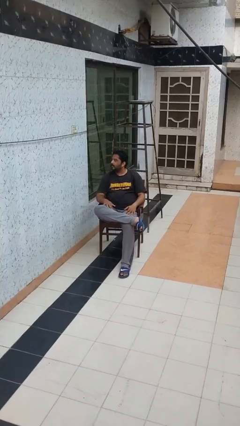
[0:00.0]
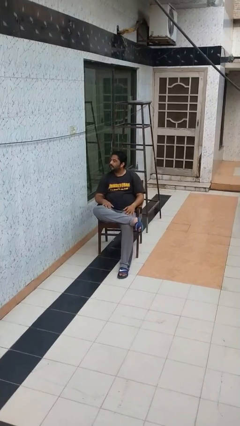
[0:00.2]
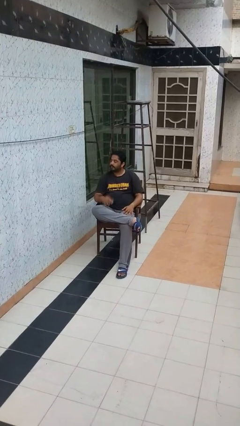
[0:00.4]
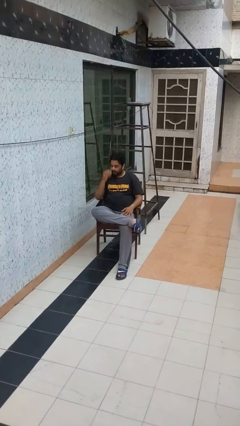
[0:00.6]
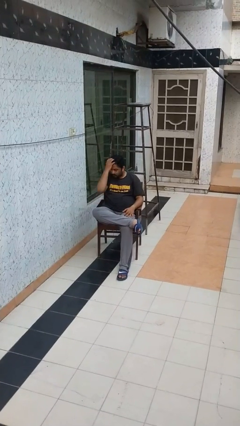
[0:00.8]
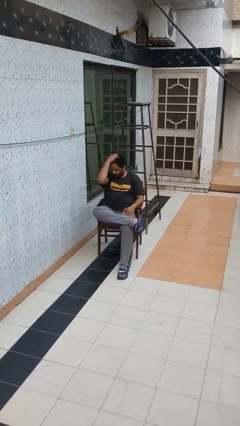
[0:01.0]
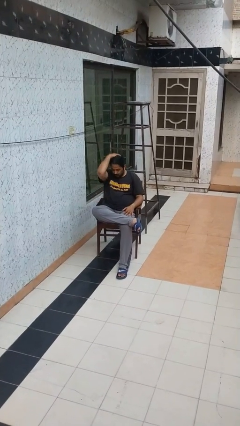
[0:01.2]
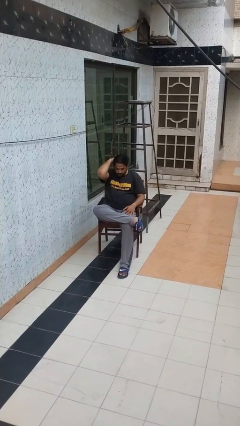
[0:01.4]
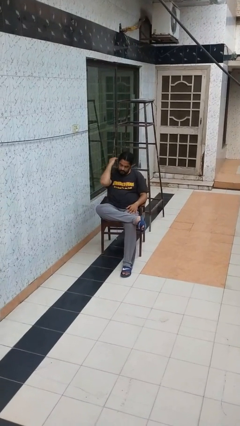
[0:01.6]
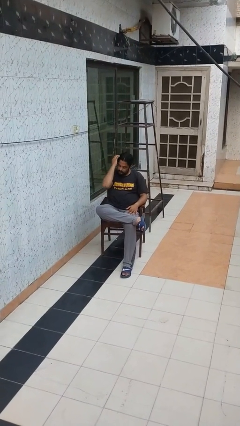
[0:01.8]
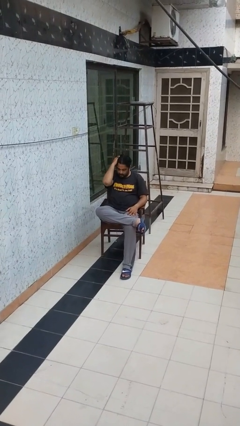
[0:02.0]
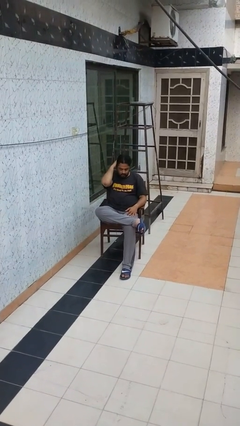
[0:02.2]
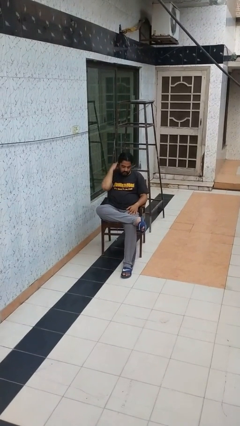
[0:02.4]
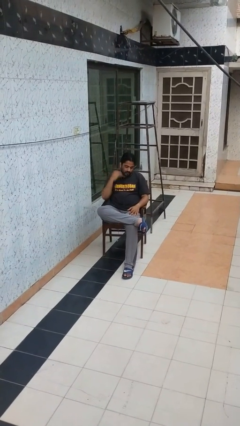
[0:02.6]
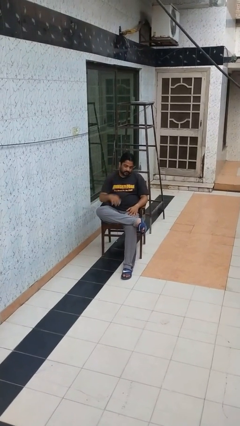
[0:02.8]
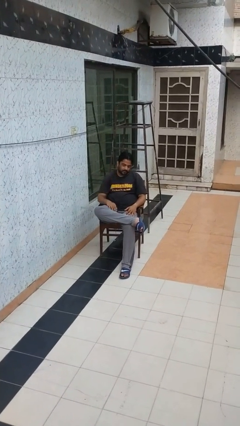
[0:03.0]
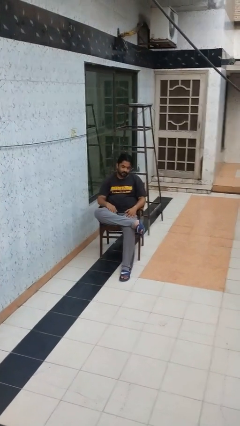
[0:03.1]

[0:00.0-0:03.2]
person strokes hair

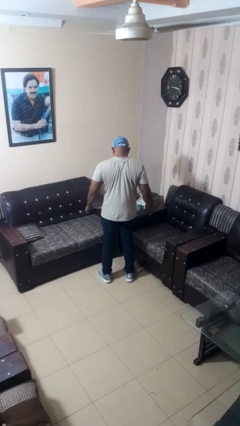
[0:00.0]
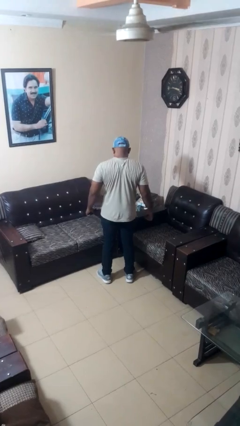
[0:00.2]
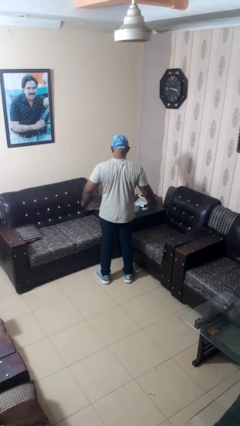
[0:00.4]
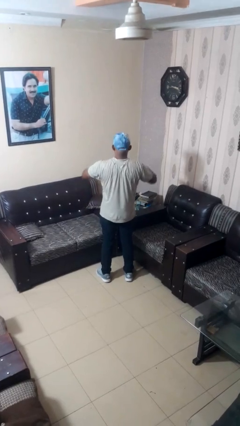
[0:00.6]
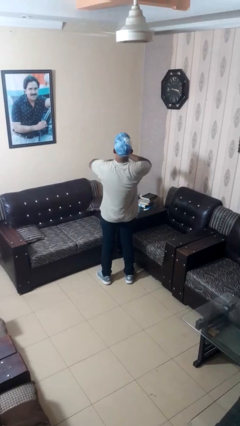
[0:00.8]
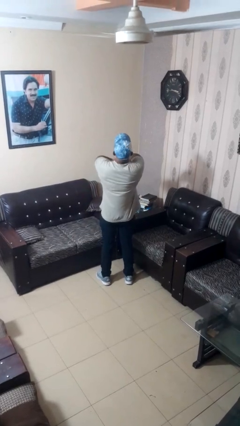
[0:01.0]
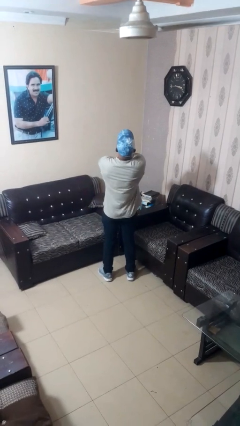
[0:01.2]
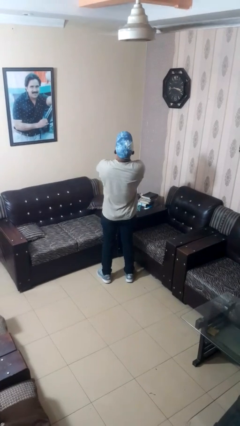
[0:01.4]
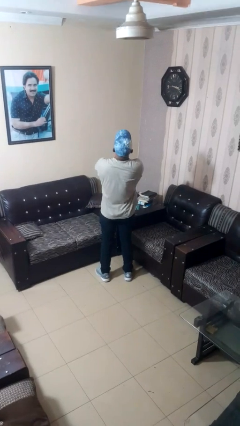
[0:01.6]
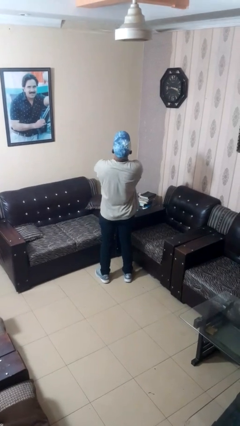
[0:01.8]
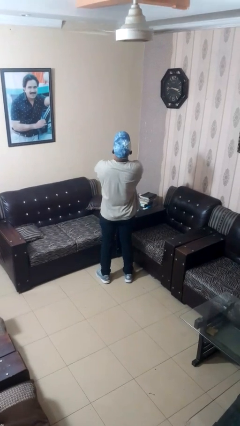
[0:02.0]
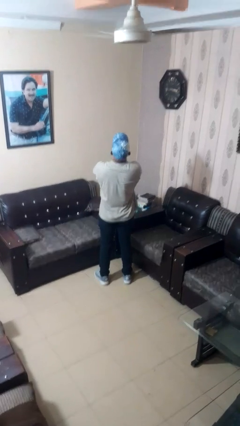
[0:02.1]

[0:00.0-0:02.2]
person crosses arms

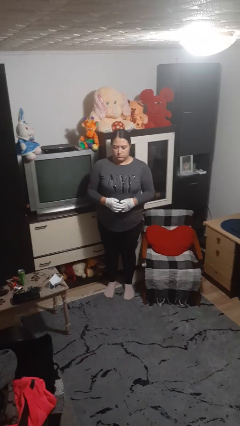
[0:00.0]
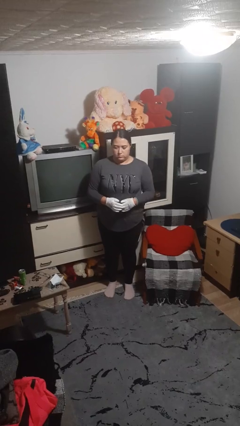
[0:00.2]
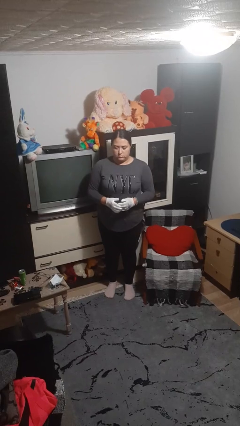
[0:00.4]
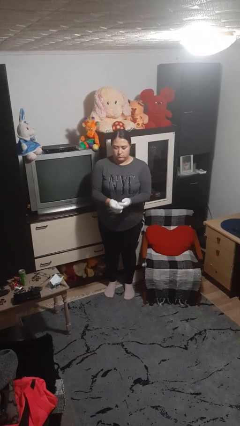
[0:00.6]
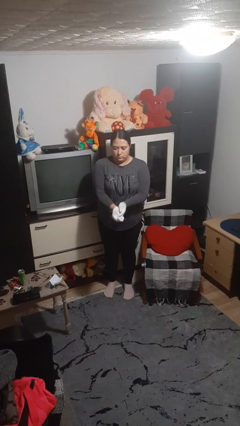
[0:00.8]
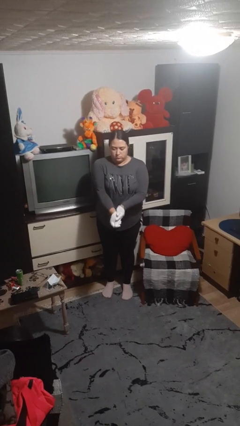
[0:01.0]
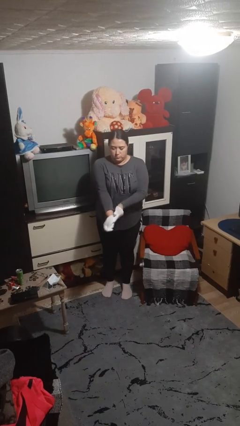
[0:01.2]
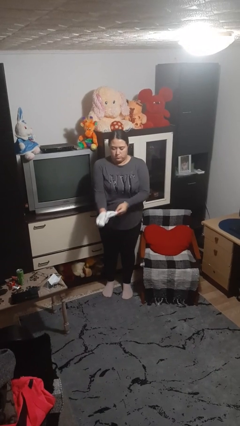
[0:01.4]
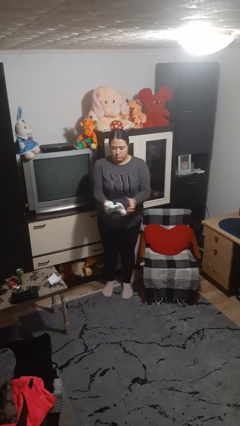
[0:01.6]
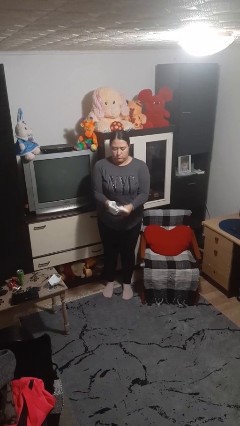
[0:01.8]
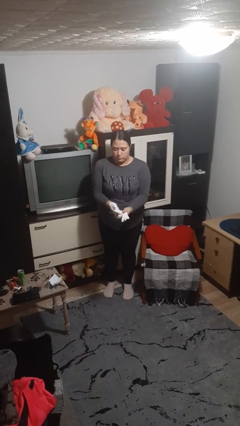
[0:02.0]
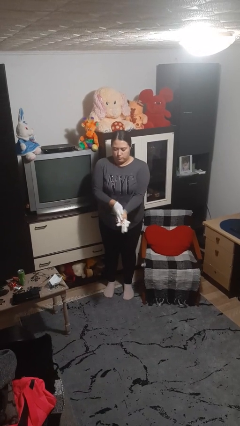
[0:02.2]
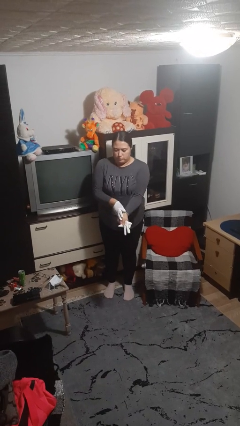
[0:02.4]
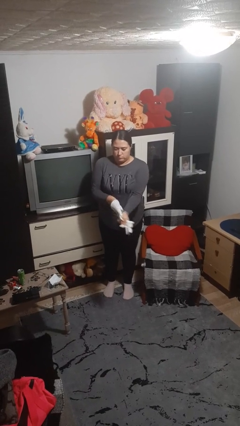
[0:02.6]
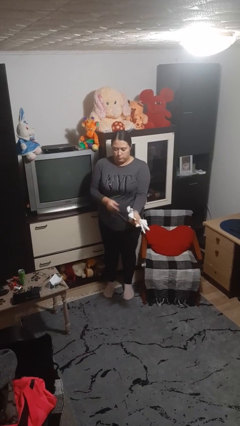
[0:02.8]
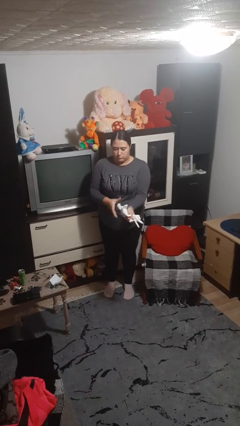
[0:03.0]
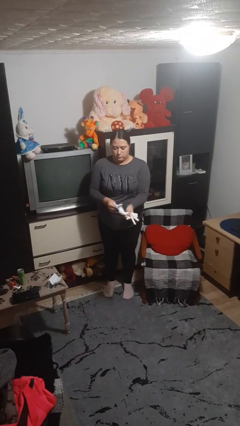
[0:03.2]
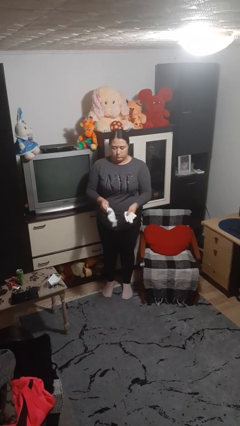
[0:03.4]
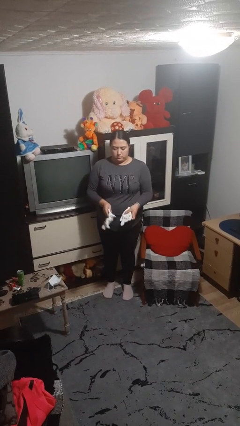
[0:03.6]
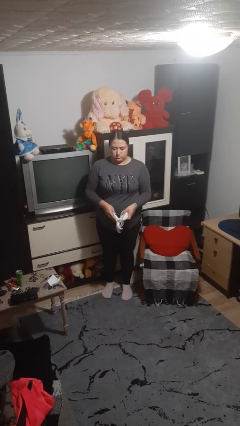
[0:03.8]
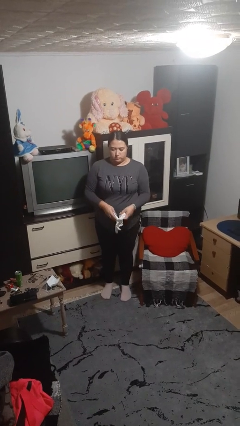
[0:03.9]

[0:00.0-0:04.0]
person takes off gloves

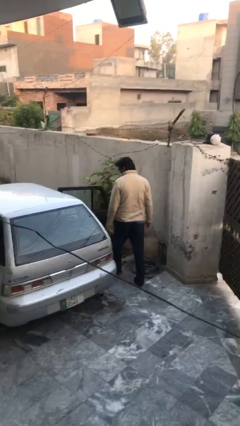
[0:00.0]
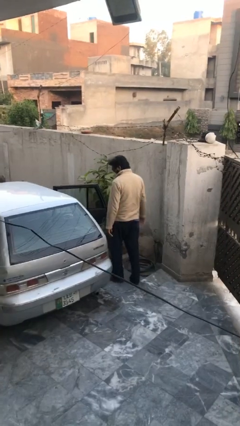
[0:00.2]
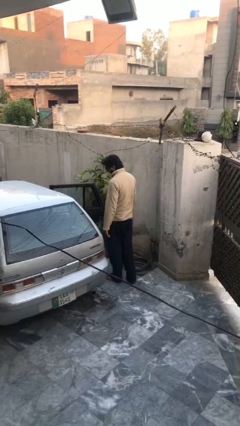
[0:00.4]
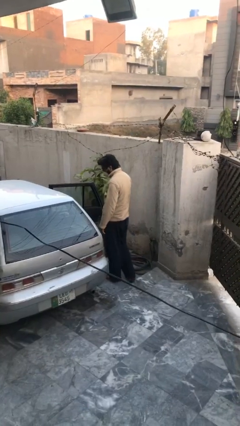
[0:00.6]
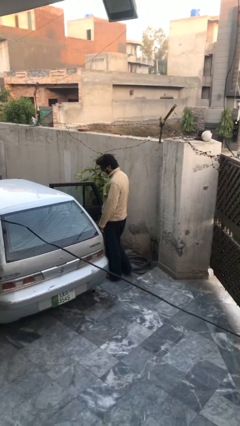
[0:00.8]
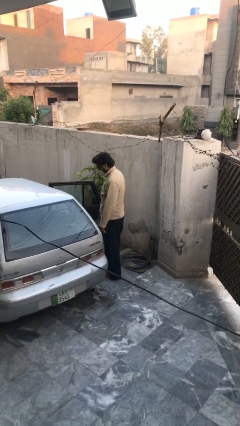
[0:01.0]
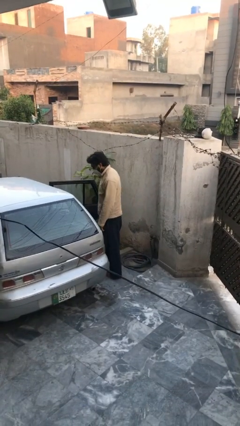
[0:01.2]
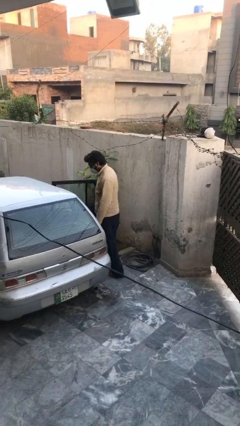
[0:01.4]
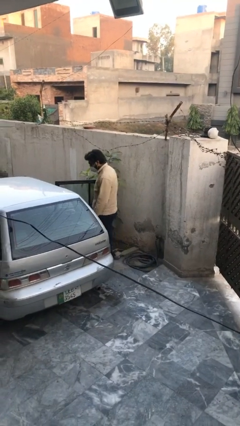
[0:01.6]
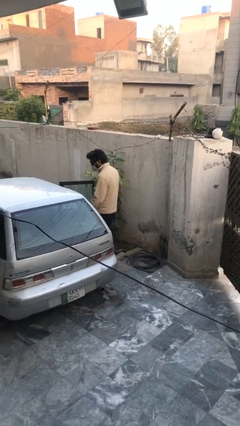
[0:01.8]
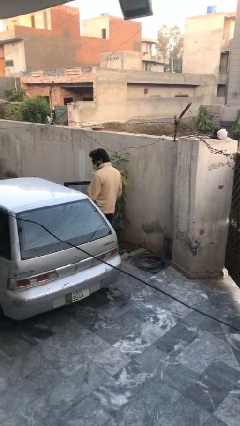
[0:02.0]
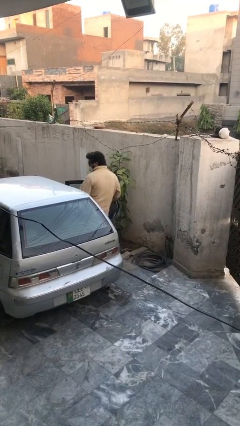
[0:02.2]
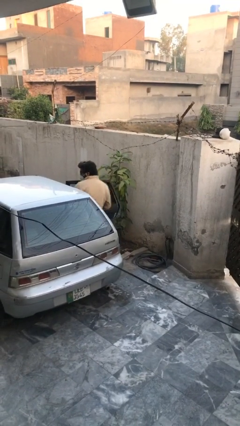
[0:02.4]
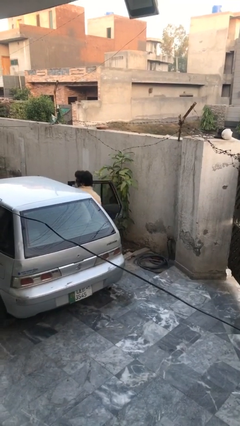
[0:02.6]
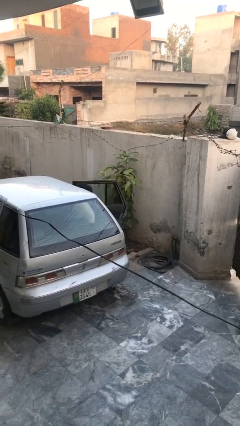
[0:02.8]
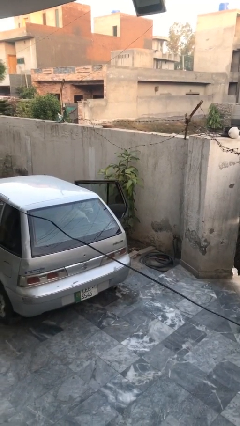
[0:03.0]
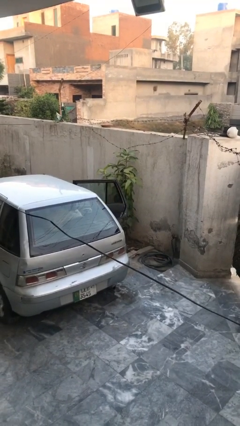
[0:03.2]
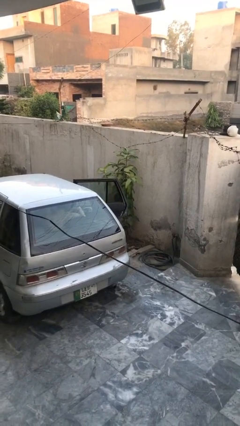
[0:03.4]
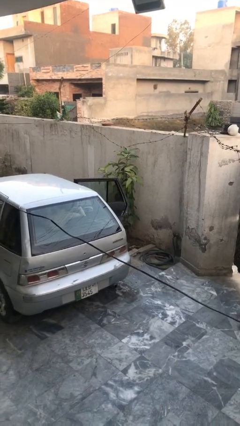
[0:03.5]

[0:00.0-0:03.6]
person enters car

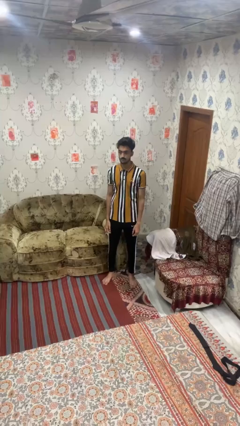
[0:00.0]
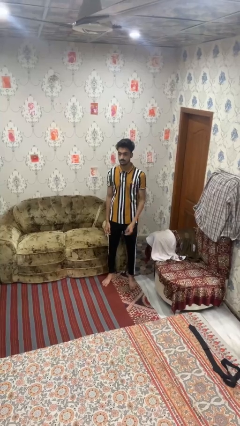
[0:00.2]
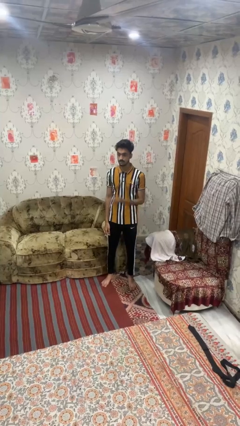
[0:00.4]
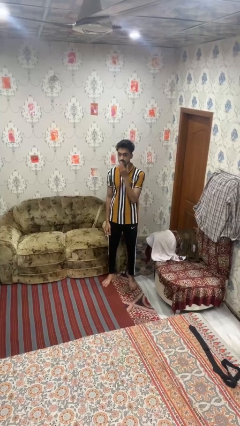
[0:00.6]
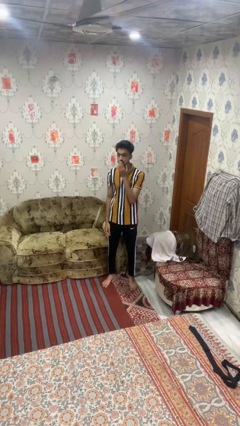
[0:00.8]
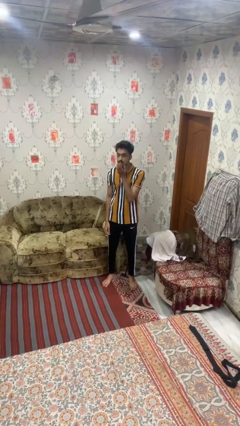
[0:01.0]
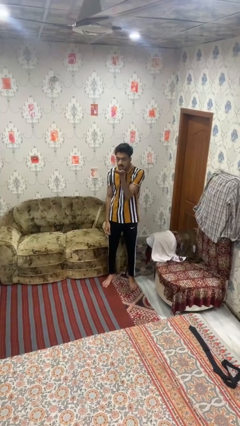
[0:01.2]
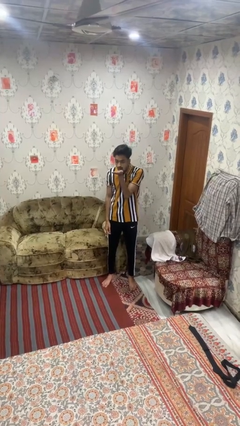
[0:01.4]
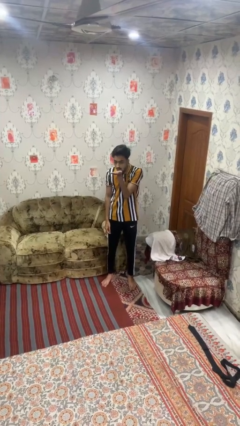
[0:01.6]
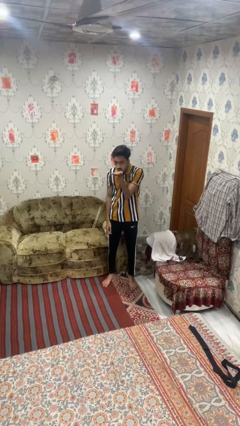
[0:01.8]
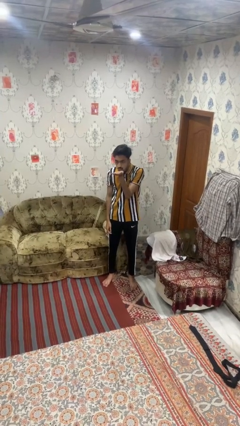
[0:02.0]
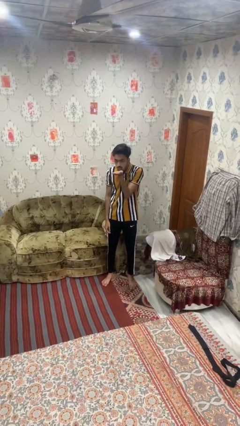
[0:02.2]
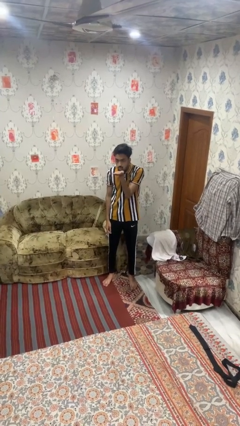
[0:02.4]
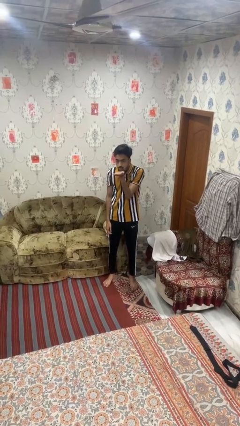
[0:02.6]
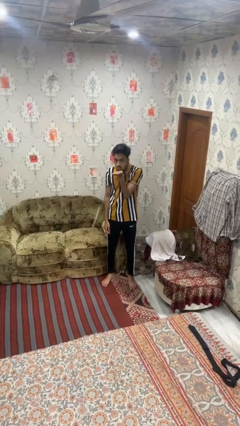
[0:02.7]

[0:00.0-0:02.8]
person gestures blow kiss

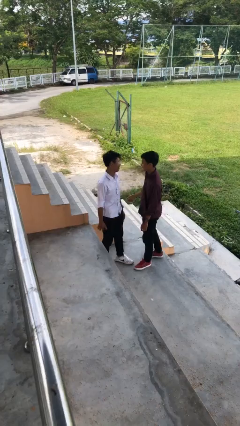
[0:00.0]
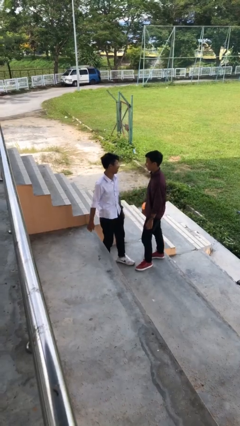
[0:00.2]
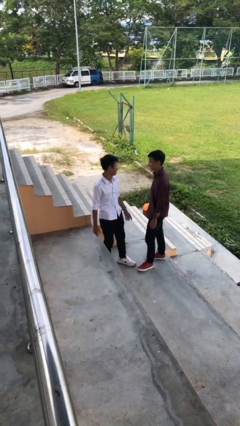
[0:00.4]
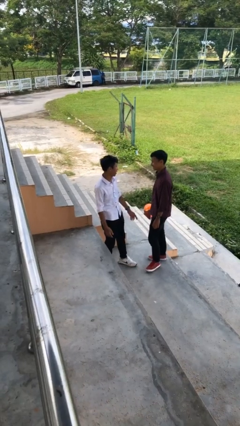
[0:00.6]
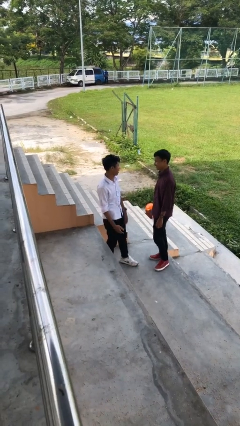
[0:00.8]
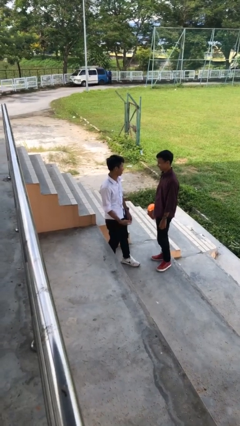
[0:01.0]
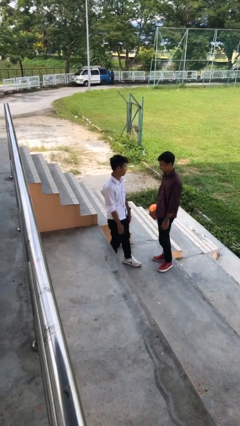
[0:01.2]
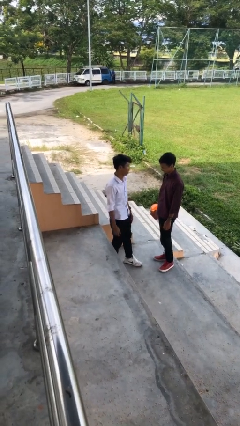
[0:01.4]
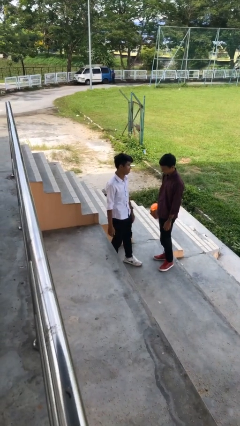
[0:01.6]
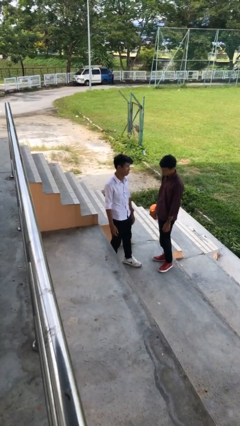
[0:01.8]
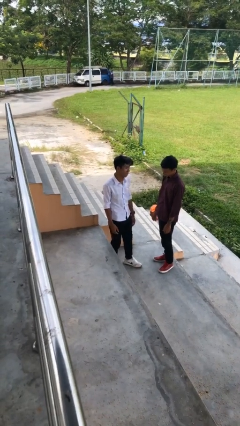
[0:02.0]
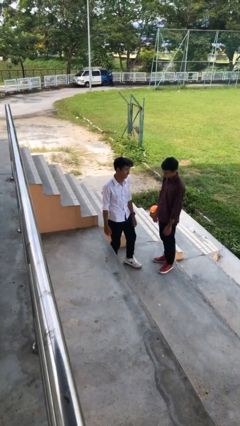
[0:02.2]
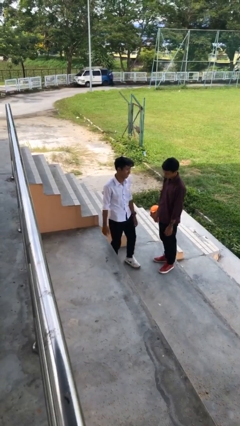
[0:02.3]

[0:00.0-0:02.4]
person talks to person
